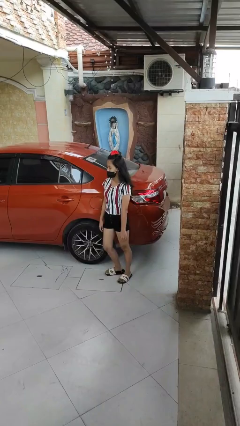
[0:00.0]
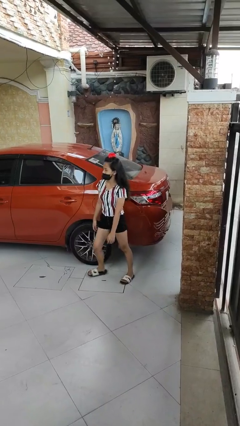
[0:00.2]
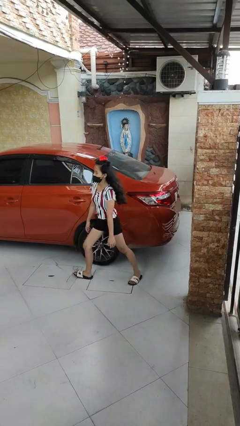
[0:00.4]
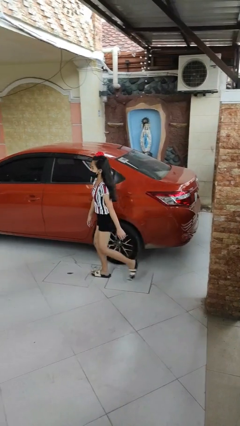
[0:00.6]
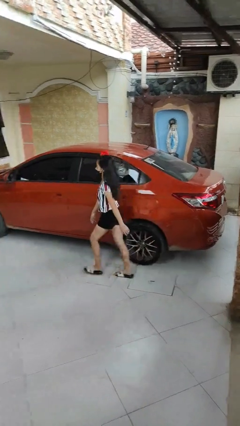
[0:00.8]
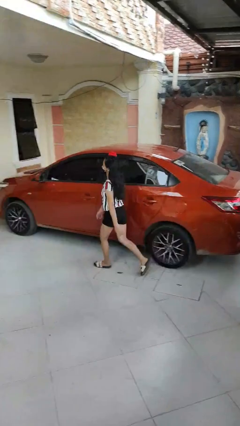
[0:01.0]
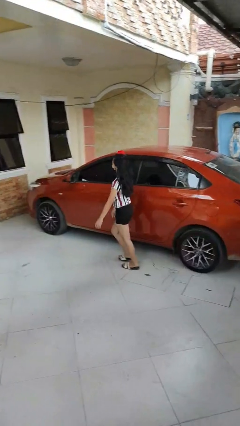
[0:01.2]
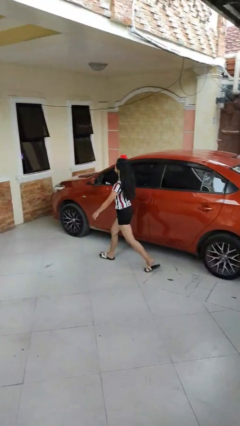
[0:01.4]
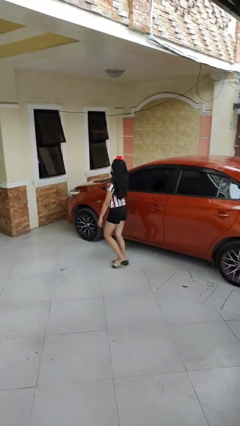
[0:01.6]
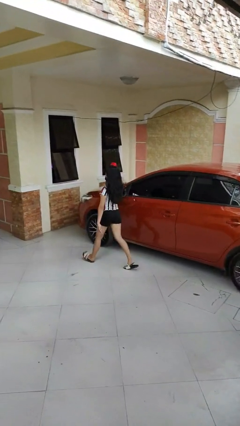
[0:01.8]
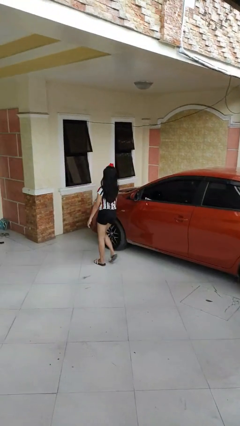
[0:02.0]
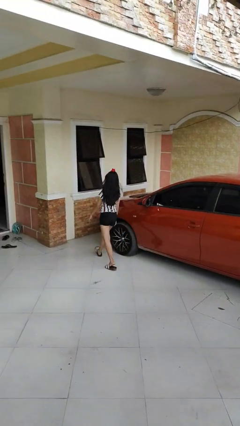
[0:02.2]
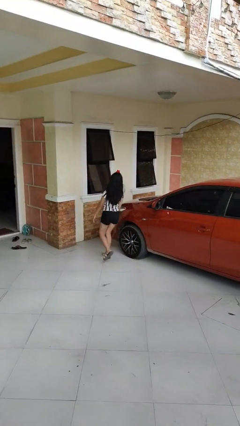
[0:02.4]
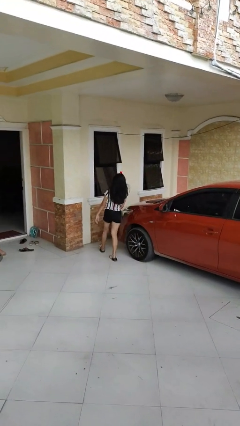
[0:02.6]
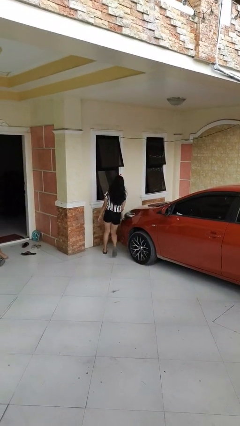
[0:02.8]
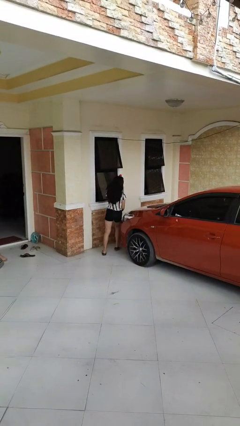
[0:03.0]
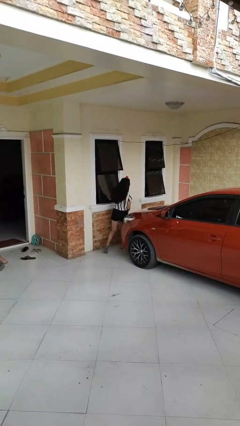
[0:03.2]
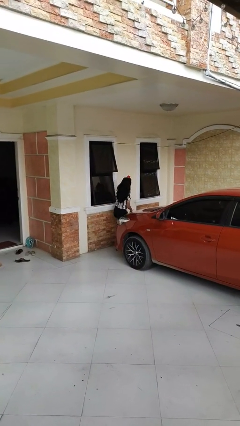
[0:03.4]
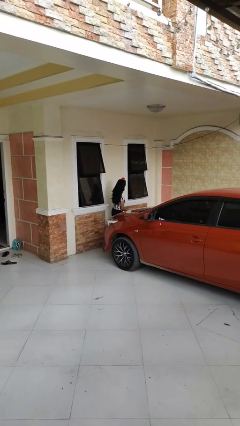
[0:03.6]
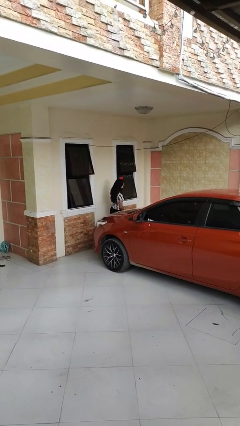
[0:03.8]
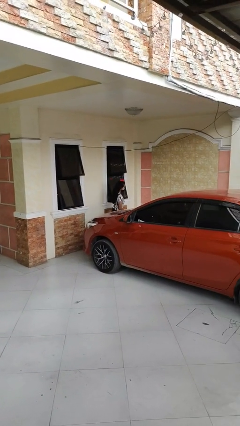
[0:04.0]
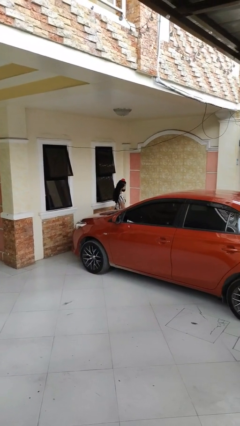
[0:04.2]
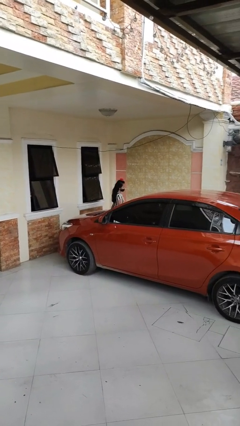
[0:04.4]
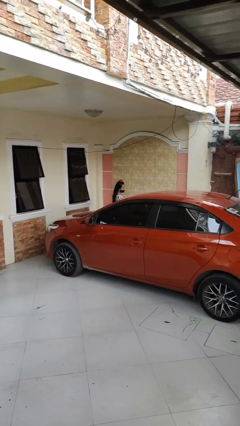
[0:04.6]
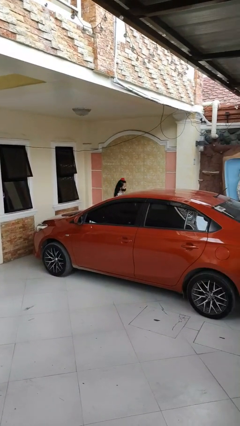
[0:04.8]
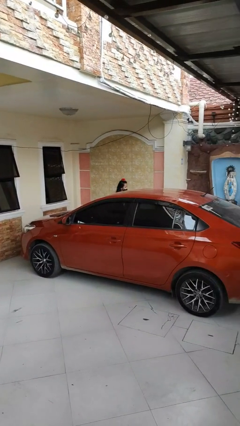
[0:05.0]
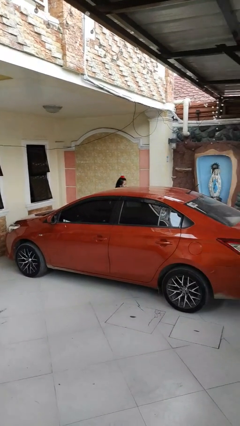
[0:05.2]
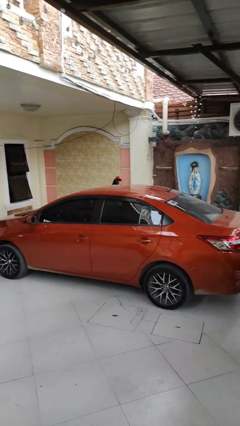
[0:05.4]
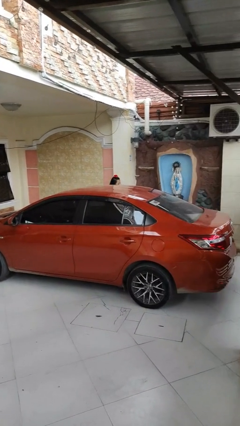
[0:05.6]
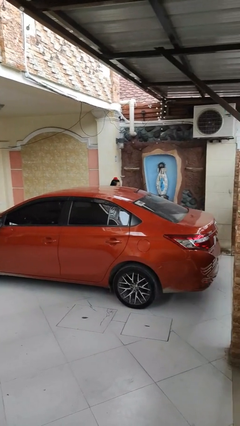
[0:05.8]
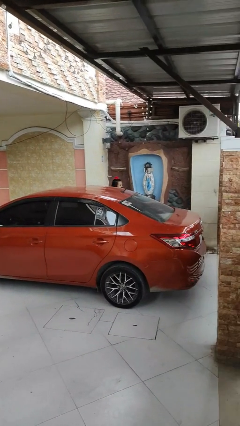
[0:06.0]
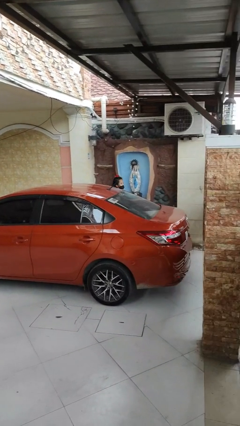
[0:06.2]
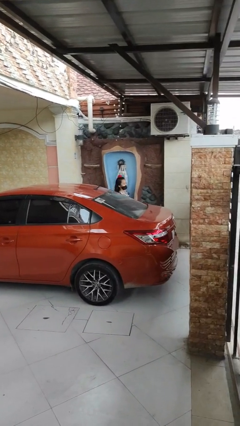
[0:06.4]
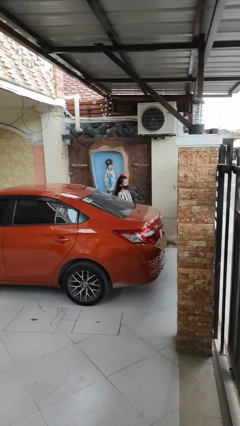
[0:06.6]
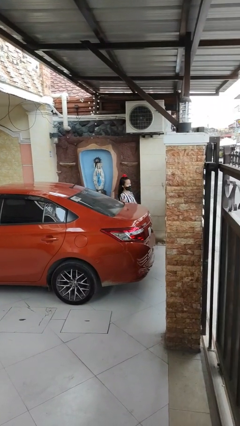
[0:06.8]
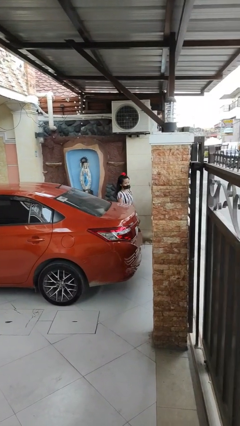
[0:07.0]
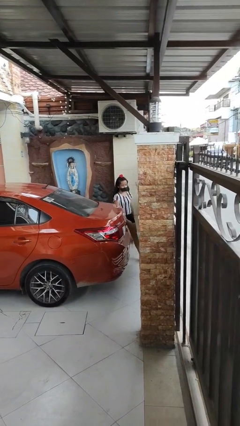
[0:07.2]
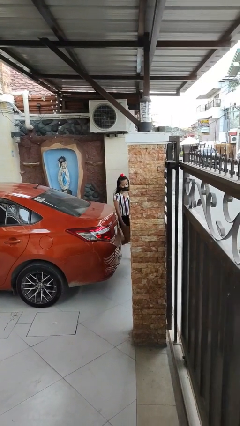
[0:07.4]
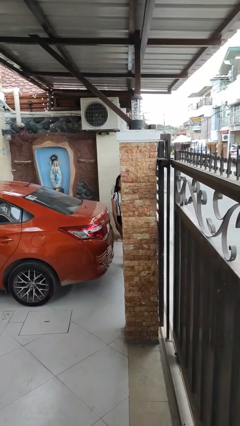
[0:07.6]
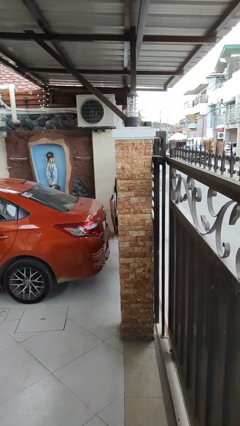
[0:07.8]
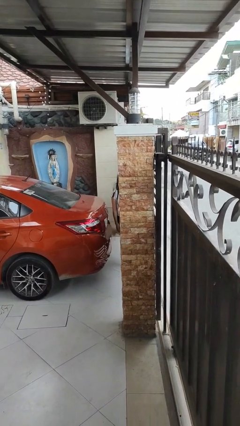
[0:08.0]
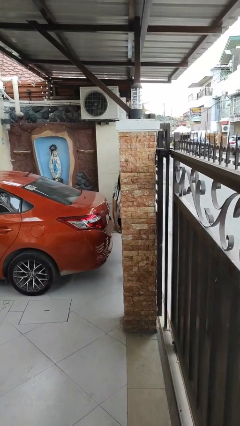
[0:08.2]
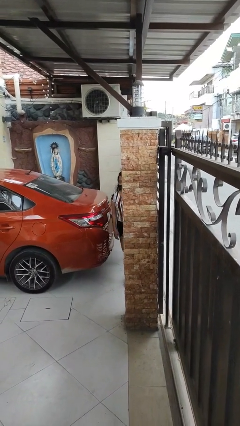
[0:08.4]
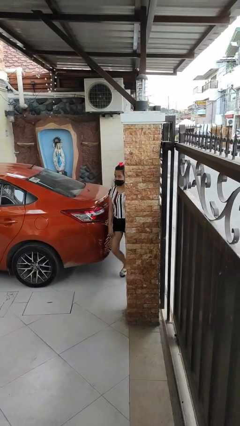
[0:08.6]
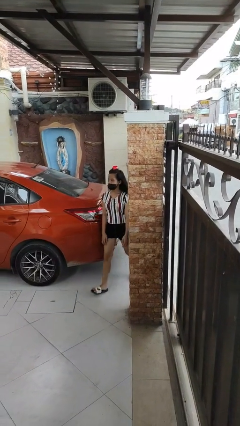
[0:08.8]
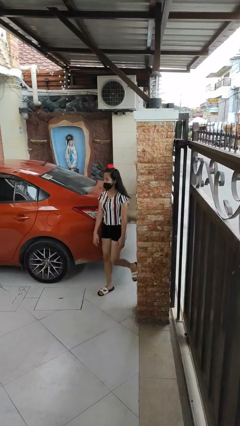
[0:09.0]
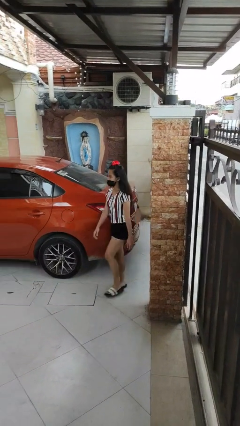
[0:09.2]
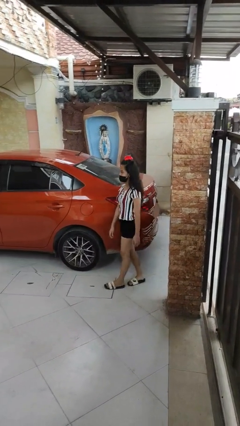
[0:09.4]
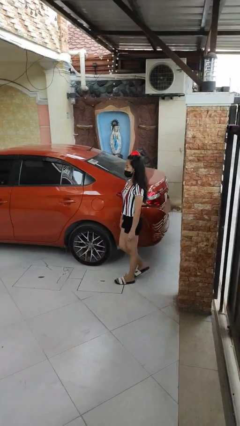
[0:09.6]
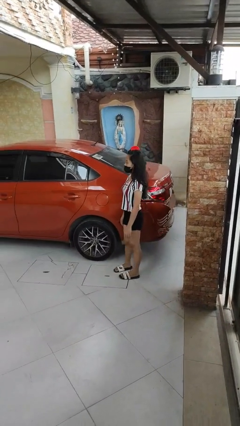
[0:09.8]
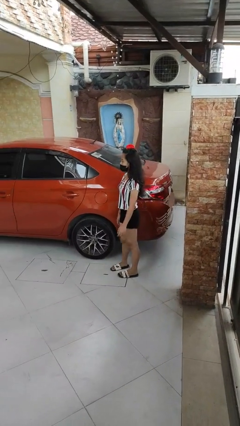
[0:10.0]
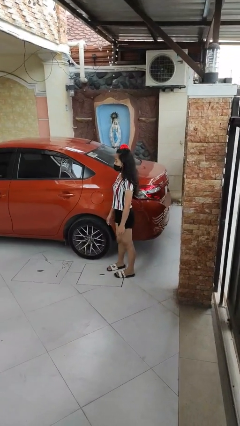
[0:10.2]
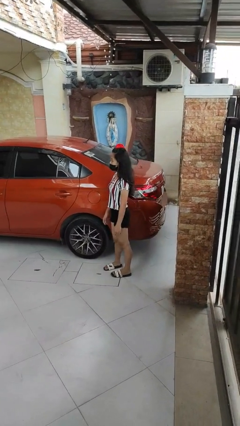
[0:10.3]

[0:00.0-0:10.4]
person walks around car

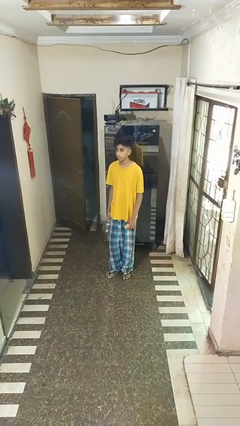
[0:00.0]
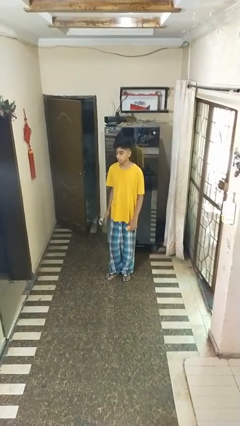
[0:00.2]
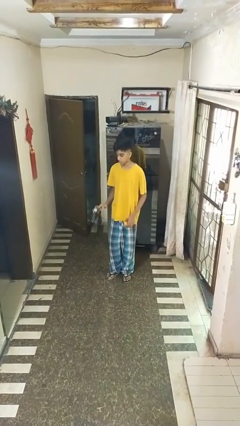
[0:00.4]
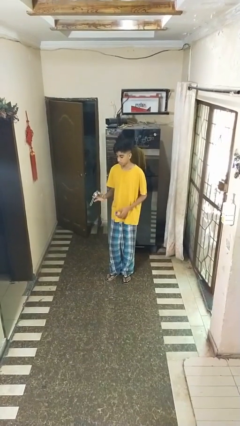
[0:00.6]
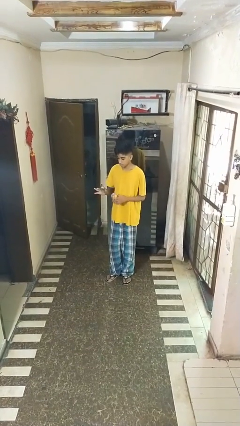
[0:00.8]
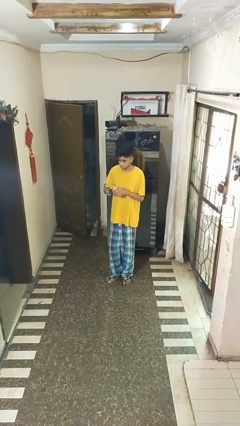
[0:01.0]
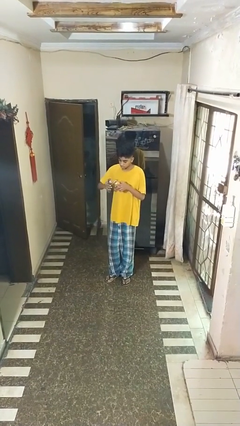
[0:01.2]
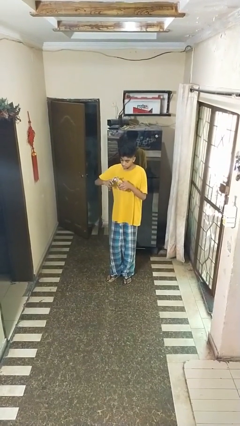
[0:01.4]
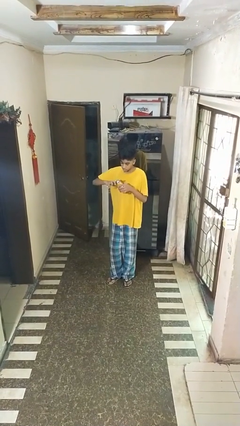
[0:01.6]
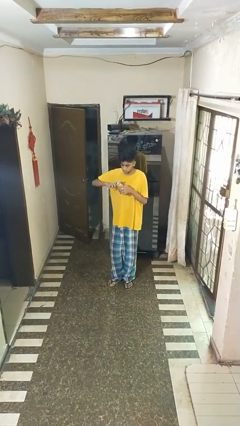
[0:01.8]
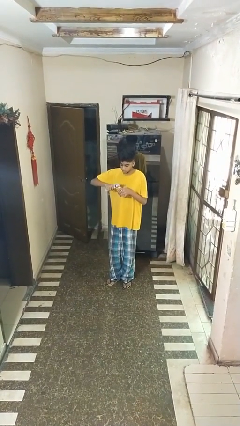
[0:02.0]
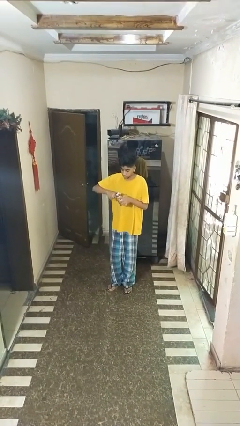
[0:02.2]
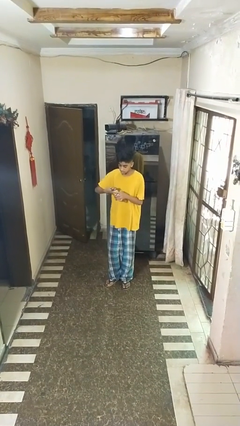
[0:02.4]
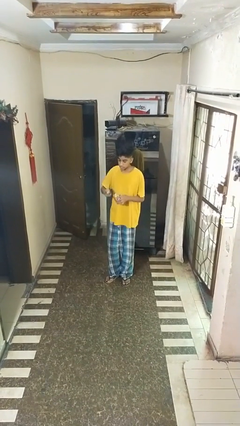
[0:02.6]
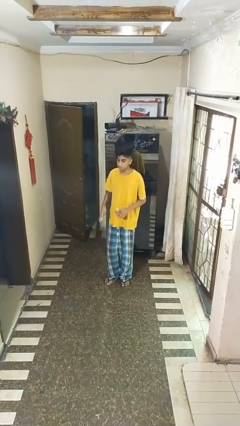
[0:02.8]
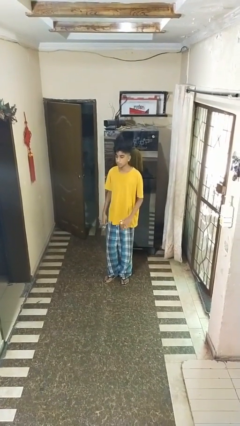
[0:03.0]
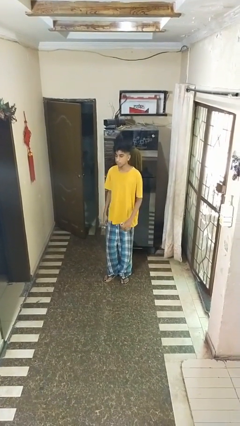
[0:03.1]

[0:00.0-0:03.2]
person opens can with can opener

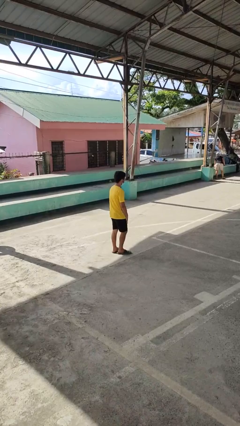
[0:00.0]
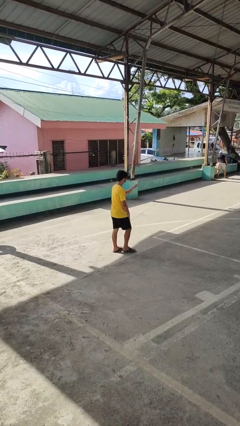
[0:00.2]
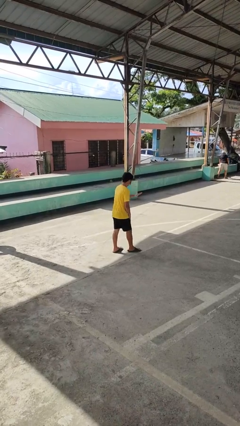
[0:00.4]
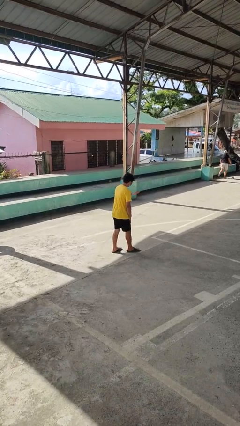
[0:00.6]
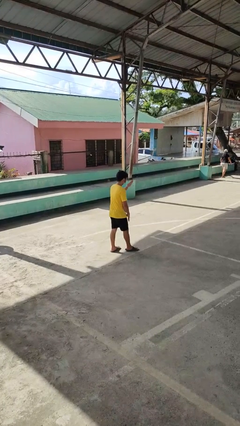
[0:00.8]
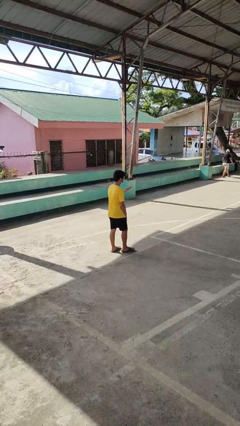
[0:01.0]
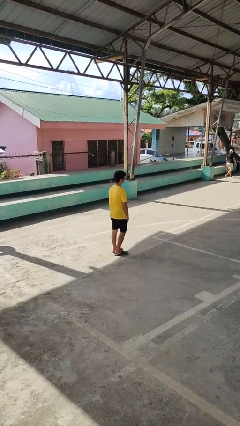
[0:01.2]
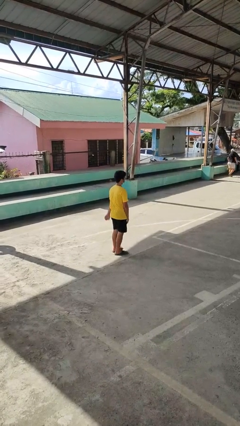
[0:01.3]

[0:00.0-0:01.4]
person karate chop

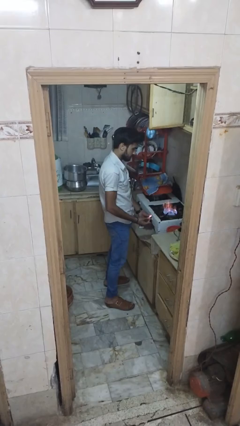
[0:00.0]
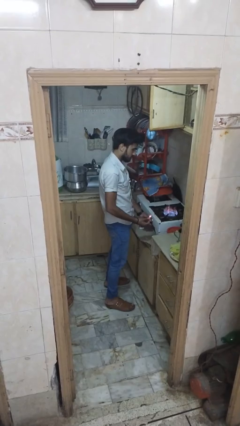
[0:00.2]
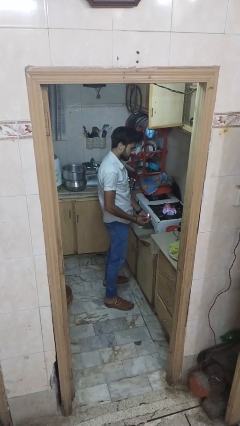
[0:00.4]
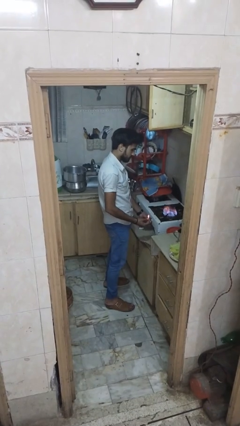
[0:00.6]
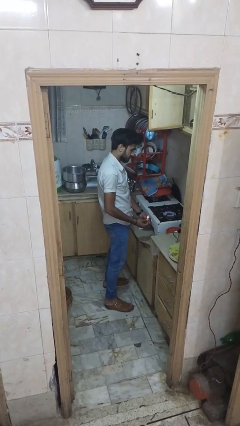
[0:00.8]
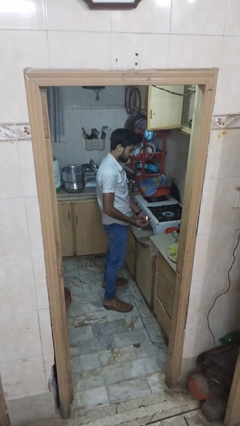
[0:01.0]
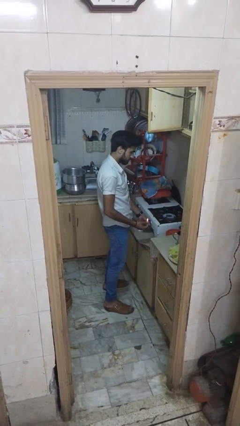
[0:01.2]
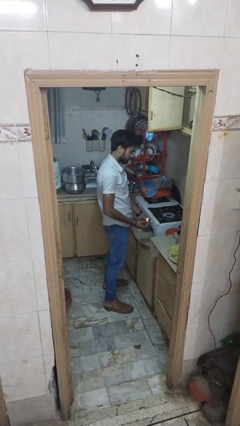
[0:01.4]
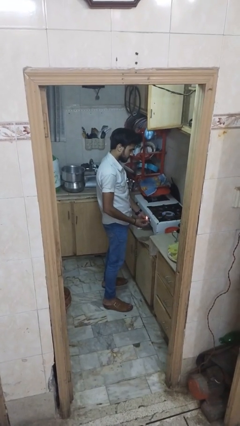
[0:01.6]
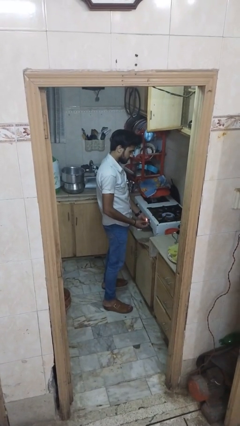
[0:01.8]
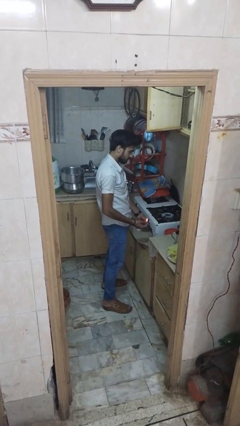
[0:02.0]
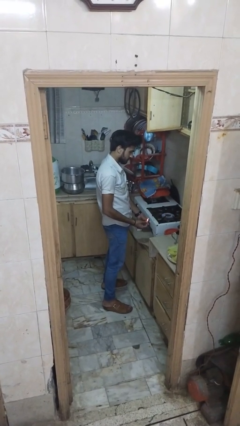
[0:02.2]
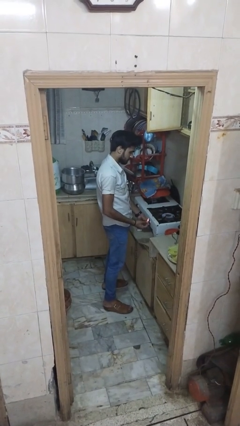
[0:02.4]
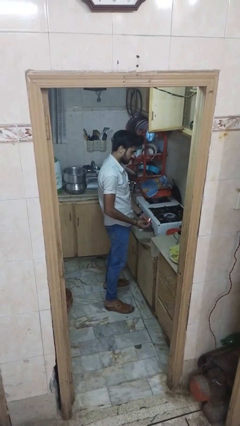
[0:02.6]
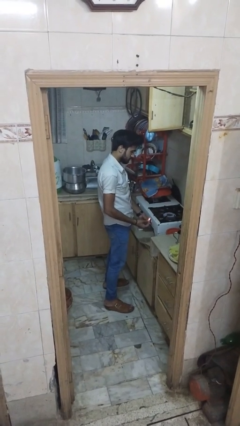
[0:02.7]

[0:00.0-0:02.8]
person turns off stovetop

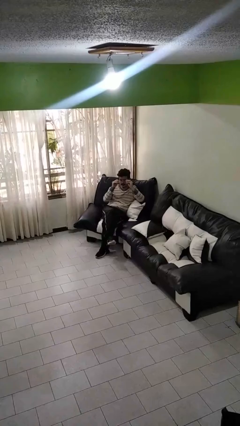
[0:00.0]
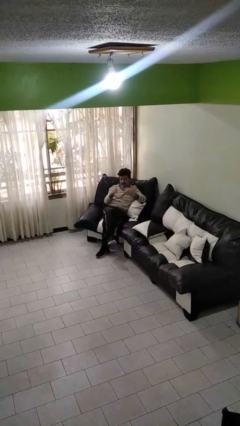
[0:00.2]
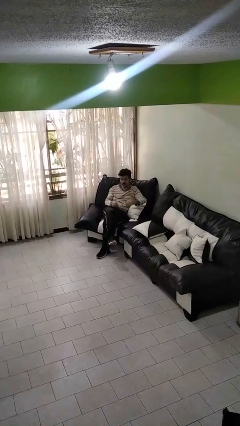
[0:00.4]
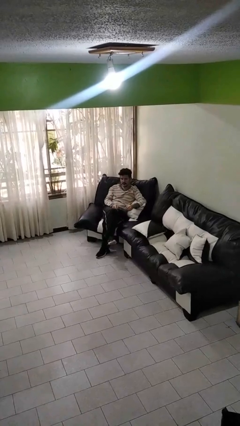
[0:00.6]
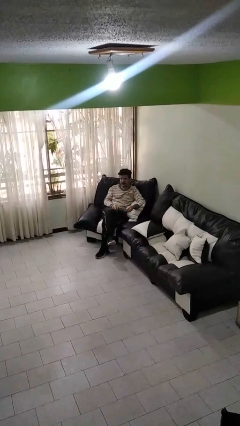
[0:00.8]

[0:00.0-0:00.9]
person takes off glasses
